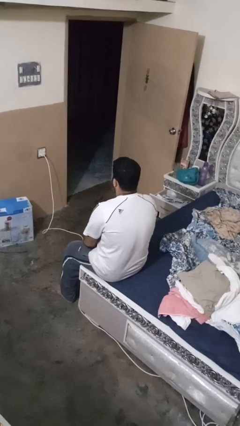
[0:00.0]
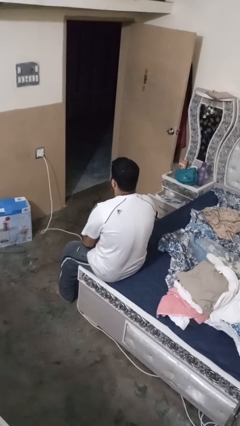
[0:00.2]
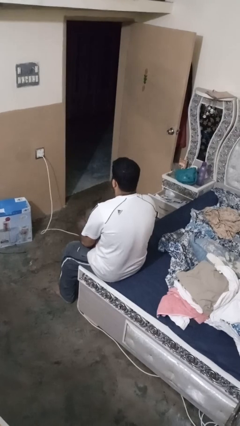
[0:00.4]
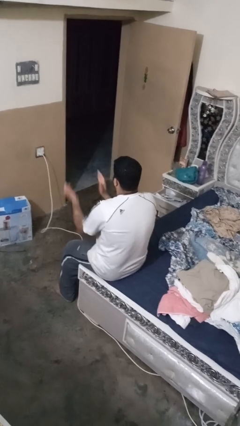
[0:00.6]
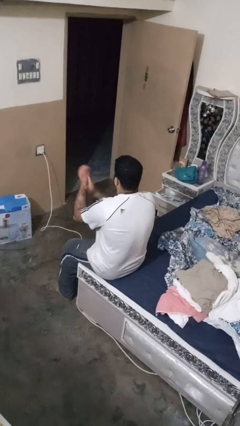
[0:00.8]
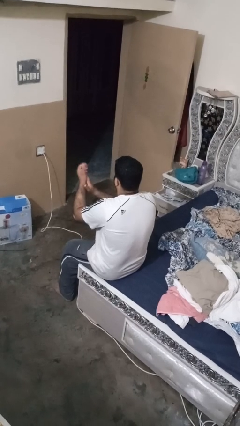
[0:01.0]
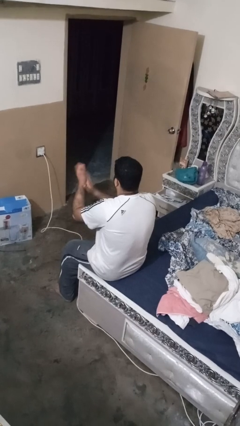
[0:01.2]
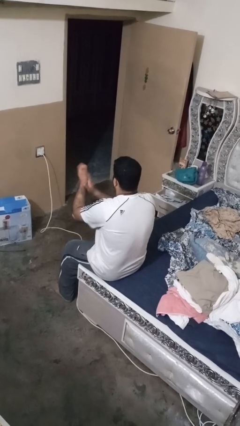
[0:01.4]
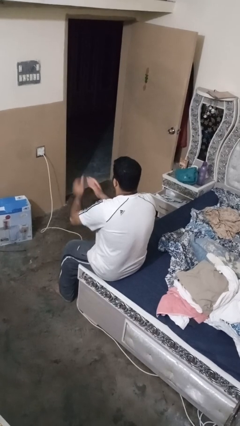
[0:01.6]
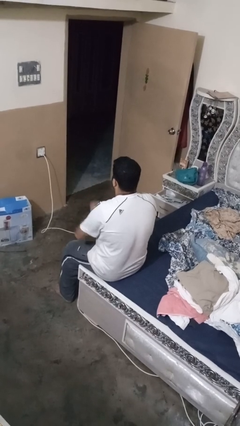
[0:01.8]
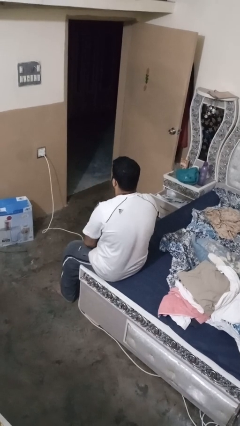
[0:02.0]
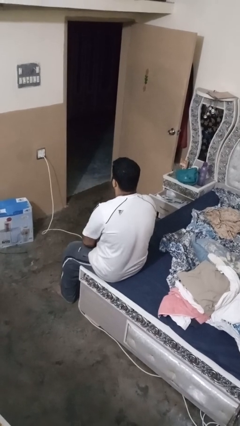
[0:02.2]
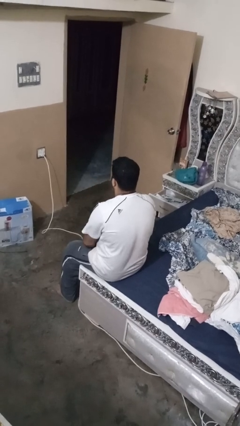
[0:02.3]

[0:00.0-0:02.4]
person claps hands

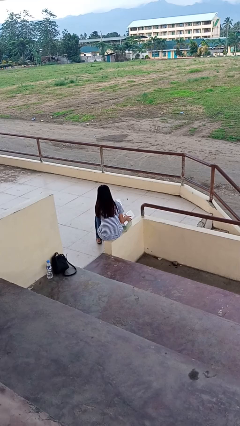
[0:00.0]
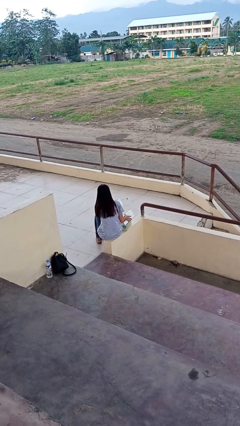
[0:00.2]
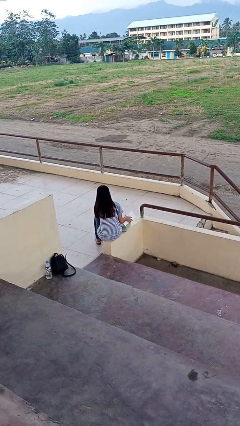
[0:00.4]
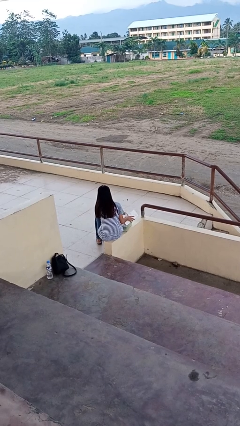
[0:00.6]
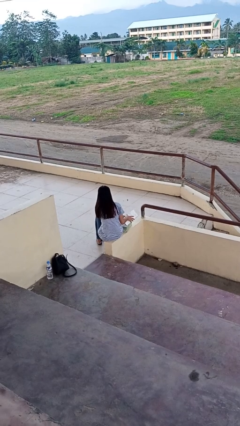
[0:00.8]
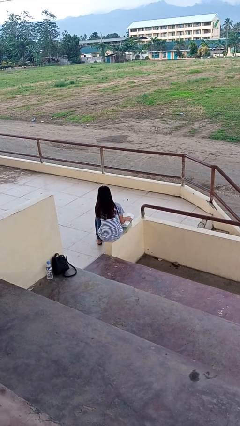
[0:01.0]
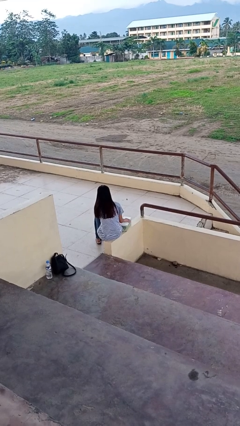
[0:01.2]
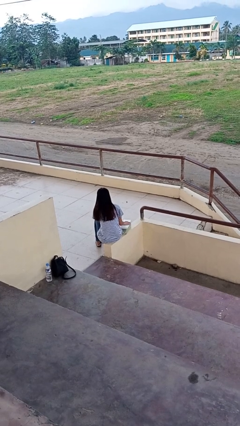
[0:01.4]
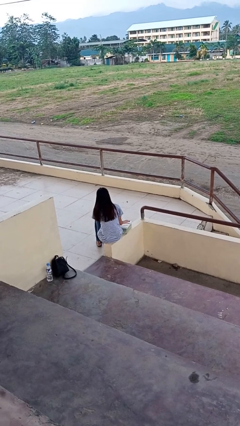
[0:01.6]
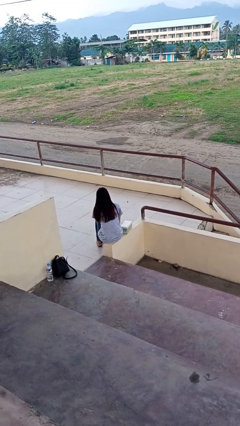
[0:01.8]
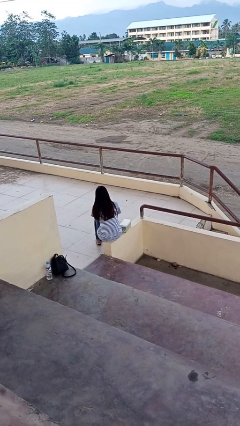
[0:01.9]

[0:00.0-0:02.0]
person puts object into box

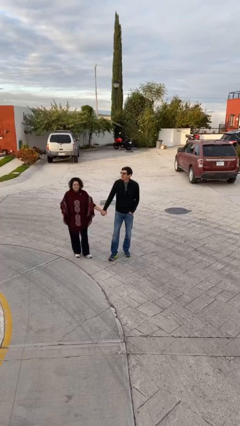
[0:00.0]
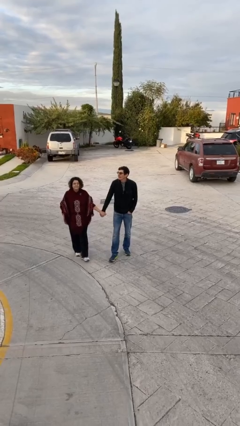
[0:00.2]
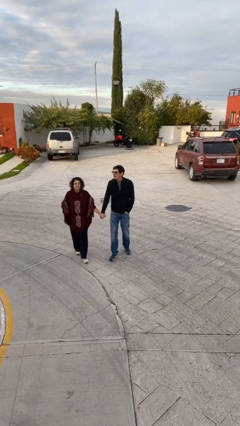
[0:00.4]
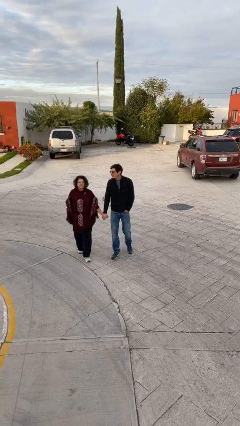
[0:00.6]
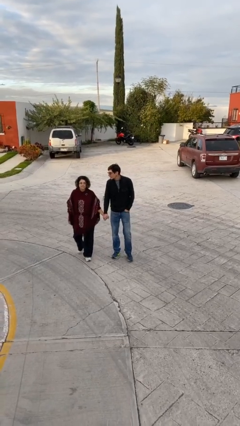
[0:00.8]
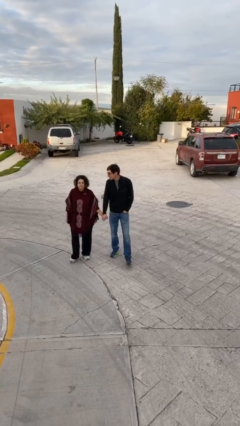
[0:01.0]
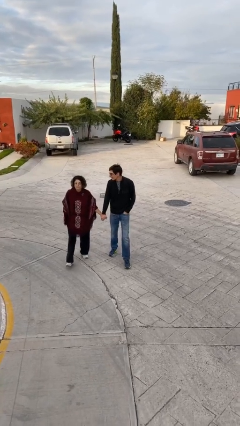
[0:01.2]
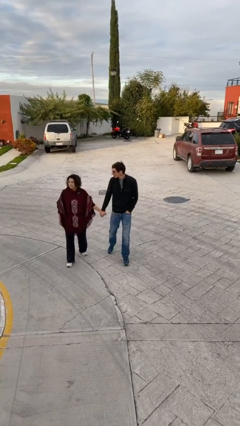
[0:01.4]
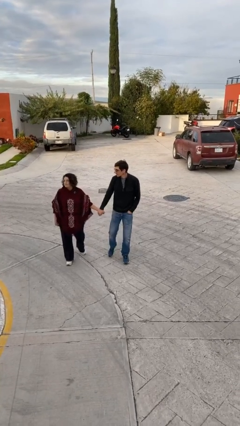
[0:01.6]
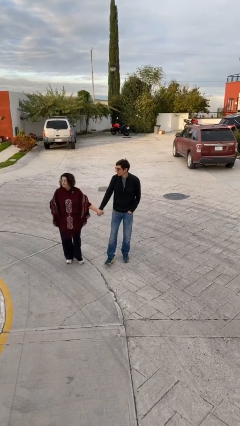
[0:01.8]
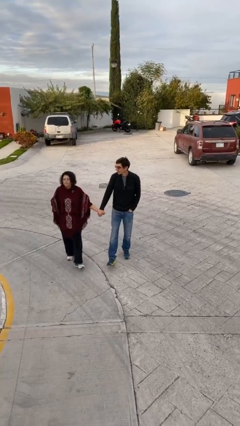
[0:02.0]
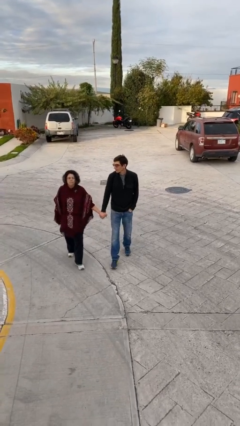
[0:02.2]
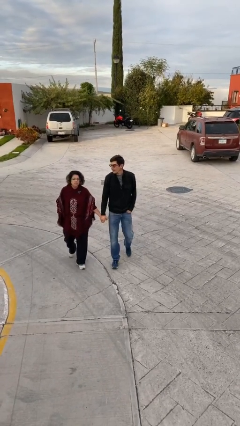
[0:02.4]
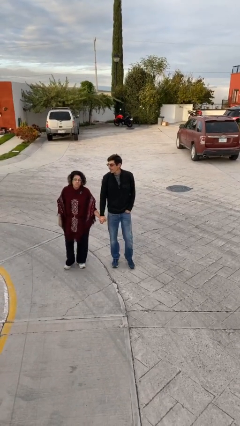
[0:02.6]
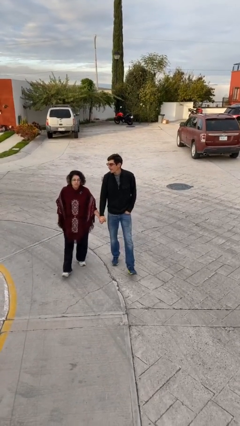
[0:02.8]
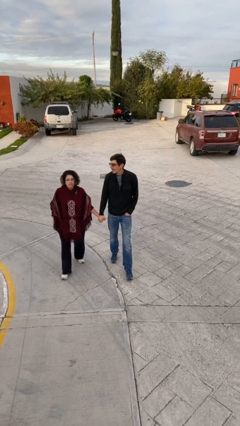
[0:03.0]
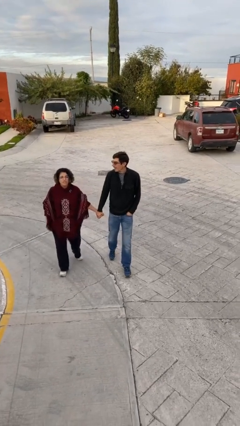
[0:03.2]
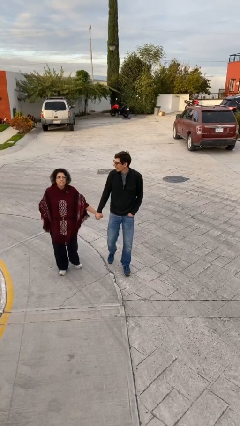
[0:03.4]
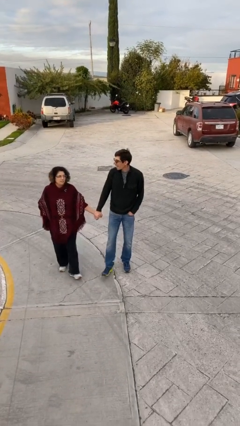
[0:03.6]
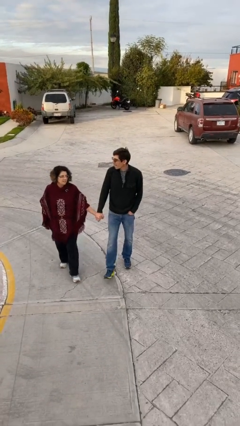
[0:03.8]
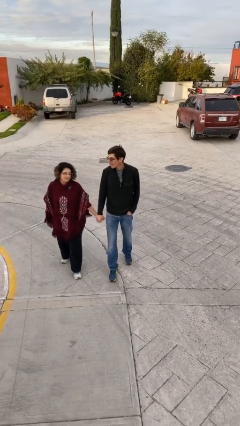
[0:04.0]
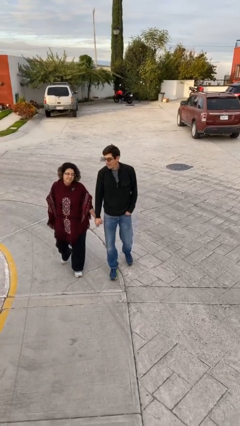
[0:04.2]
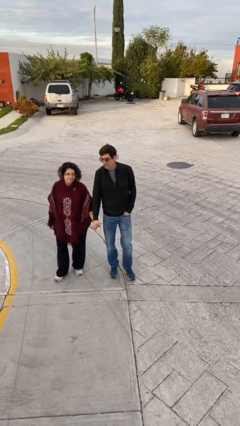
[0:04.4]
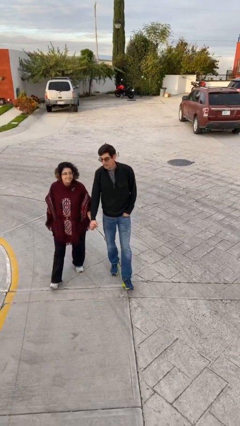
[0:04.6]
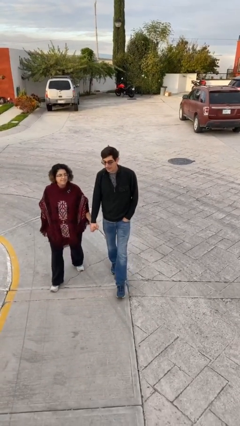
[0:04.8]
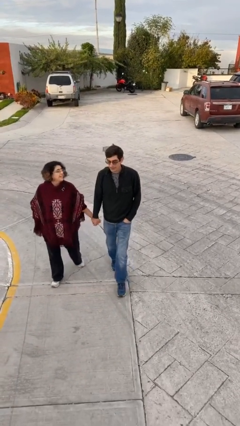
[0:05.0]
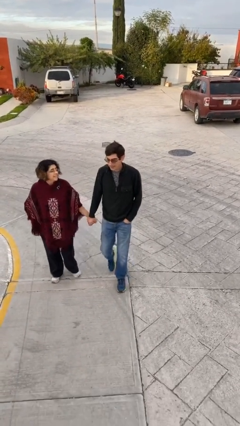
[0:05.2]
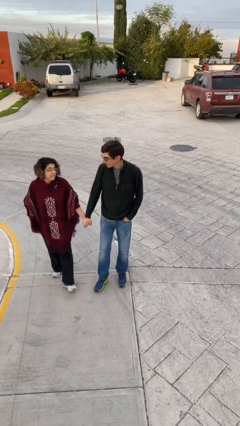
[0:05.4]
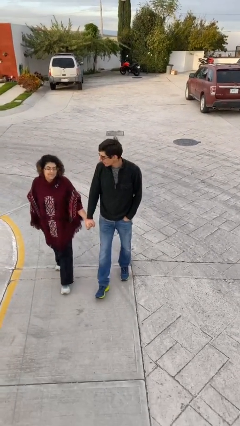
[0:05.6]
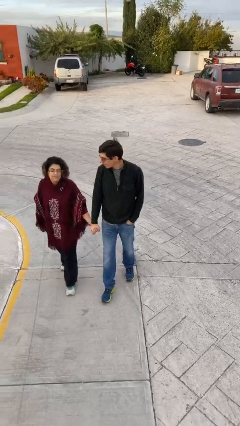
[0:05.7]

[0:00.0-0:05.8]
person holds hand

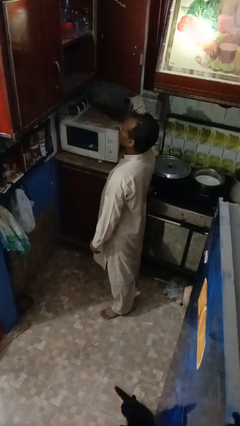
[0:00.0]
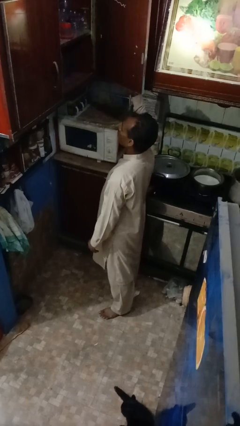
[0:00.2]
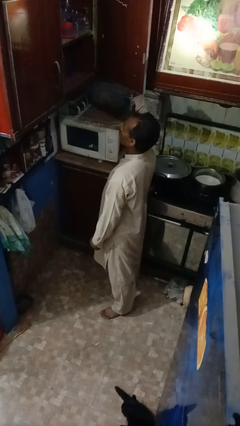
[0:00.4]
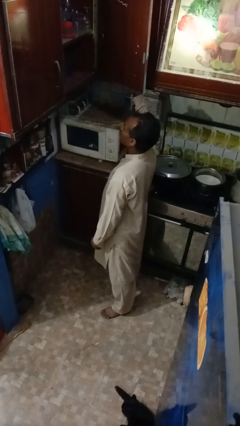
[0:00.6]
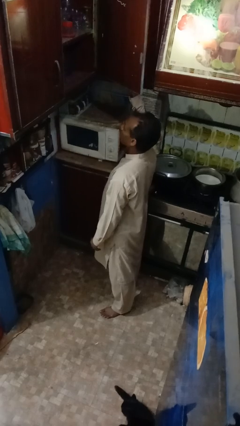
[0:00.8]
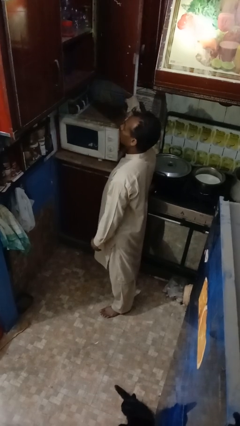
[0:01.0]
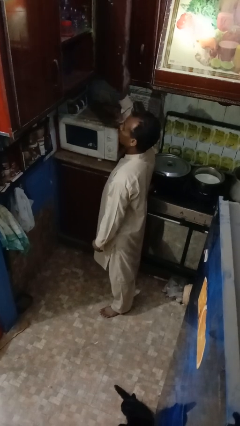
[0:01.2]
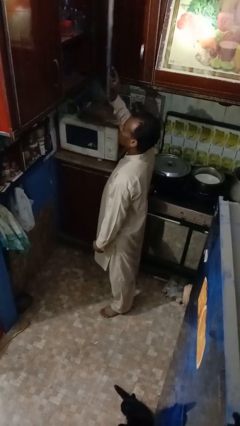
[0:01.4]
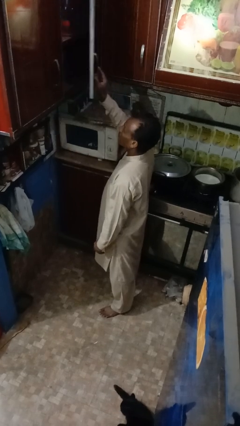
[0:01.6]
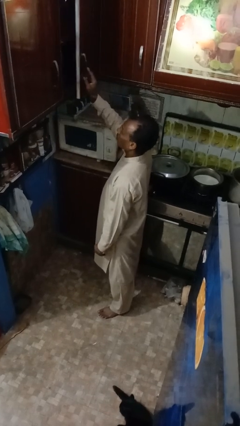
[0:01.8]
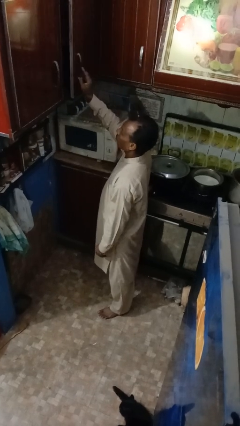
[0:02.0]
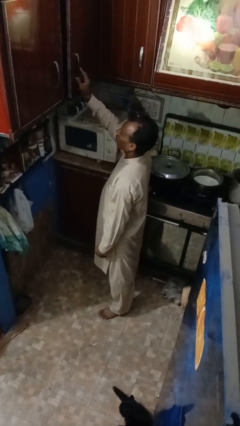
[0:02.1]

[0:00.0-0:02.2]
person closes cabinet

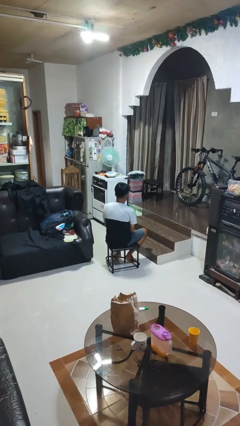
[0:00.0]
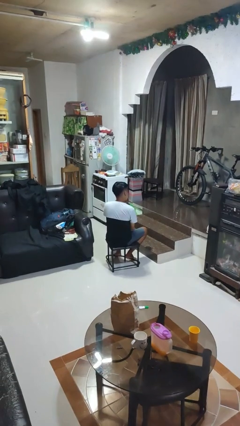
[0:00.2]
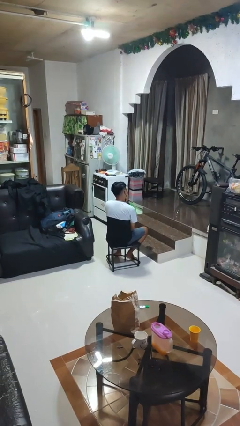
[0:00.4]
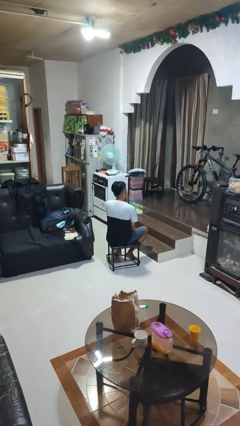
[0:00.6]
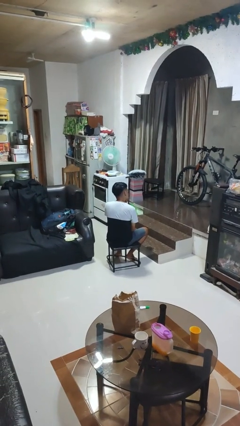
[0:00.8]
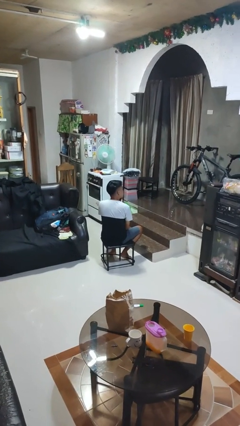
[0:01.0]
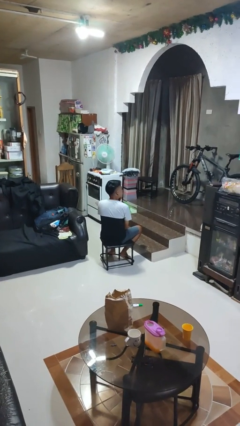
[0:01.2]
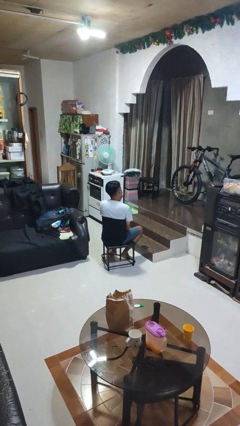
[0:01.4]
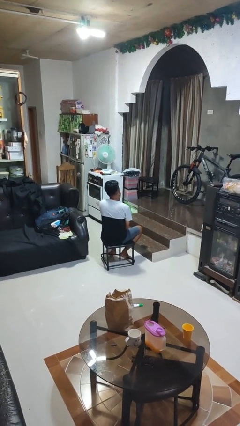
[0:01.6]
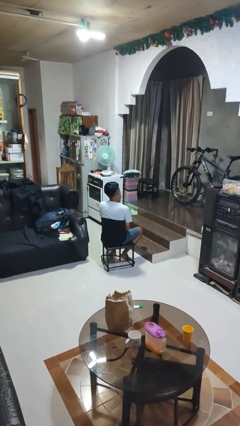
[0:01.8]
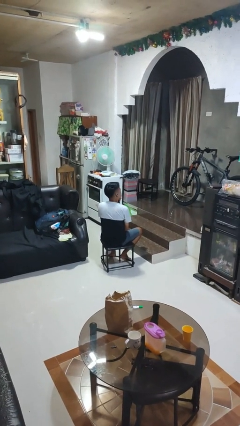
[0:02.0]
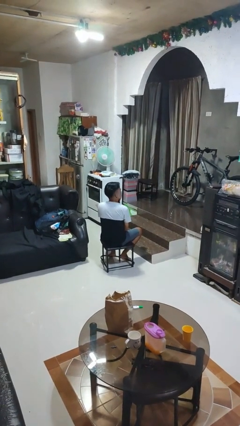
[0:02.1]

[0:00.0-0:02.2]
person strokes chin

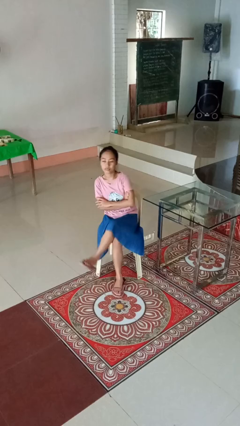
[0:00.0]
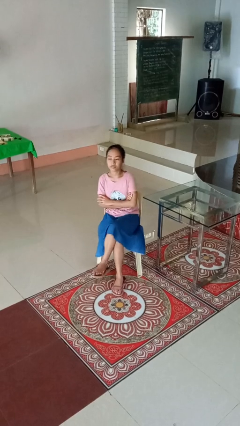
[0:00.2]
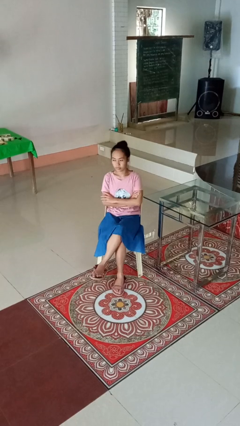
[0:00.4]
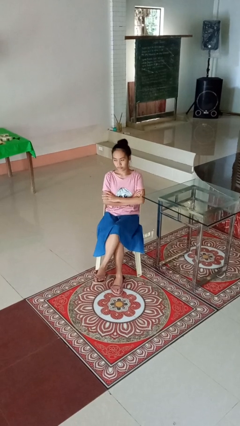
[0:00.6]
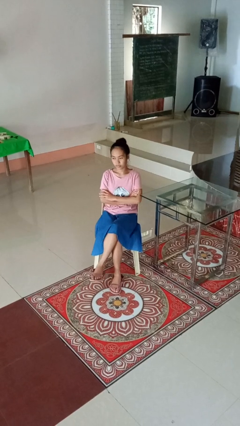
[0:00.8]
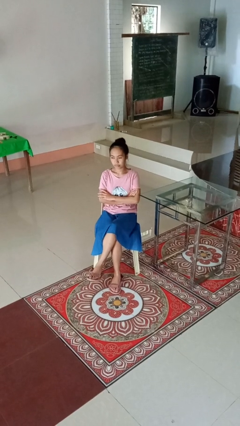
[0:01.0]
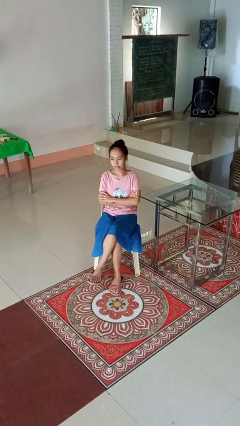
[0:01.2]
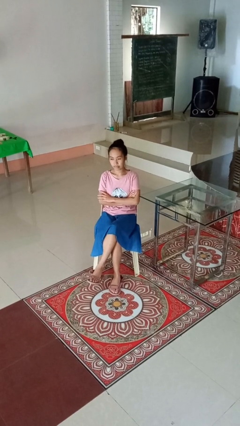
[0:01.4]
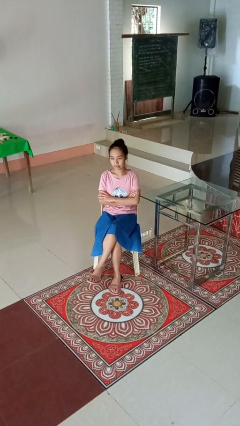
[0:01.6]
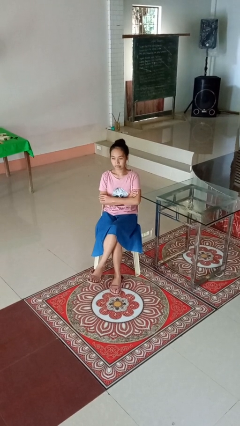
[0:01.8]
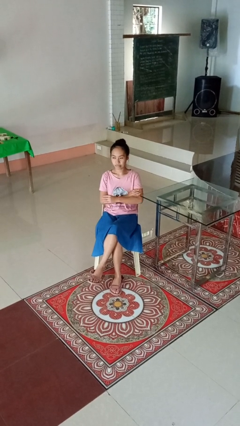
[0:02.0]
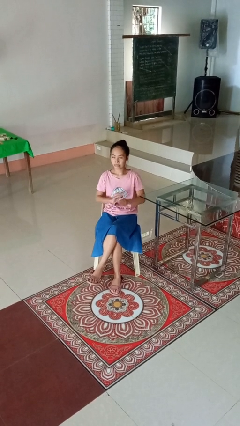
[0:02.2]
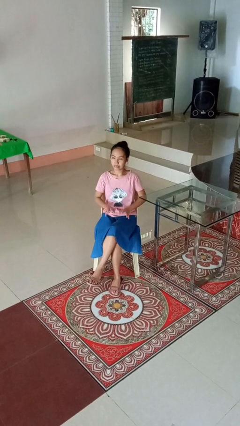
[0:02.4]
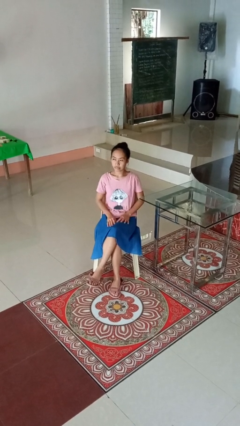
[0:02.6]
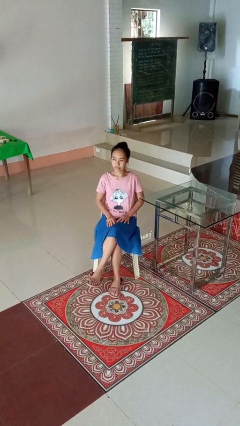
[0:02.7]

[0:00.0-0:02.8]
person crosses arms

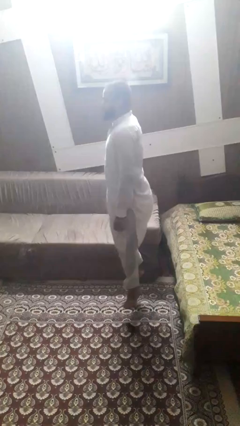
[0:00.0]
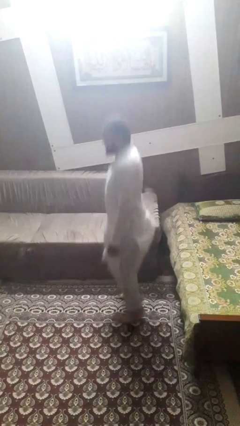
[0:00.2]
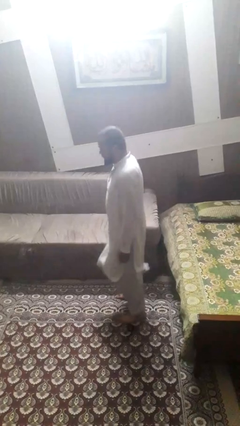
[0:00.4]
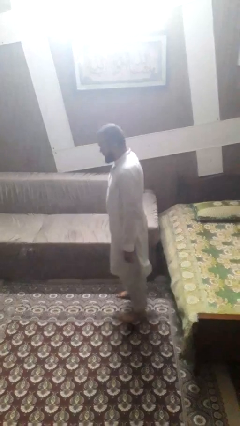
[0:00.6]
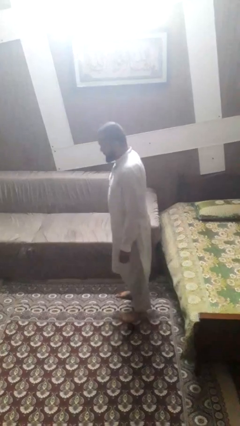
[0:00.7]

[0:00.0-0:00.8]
person jumps
